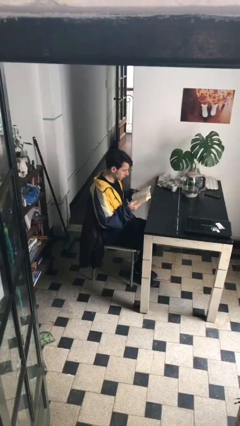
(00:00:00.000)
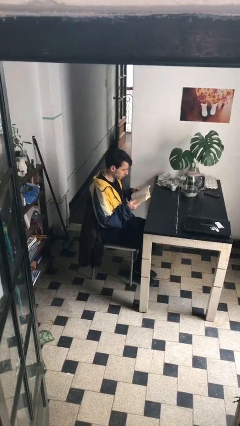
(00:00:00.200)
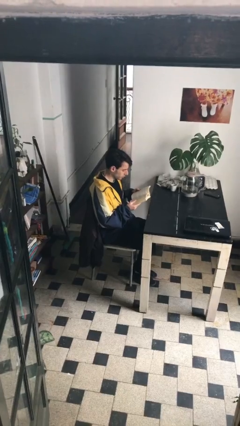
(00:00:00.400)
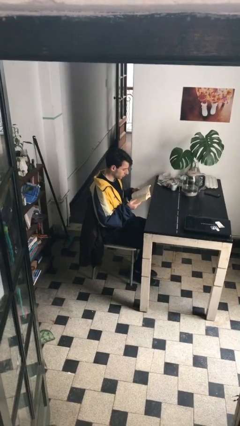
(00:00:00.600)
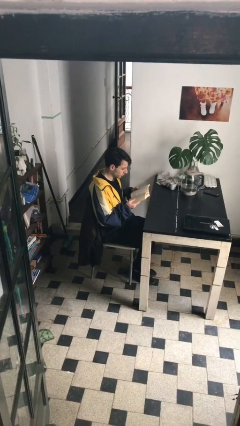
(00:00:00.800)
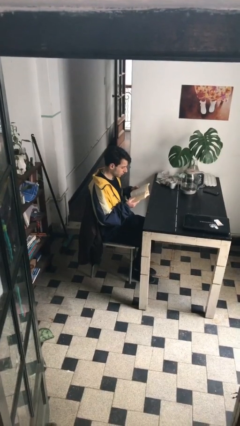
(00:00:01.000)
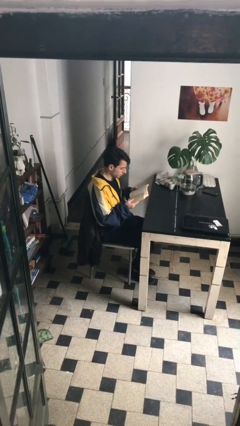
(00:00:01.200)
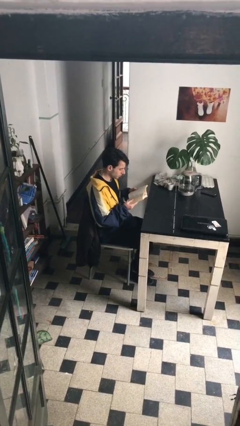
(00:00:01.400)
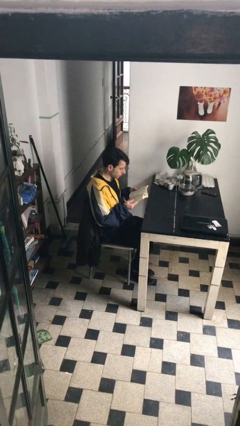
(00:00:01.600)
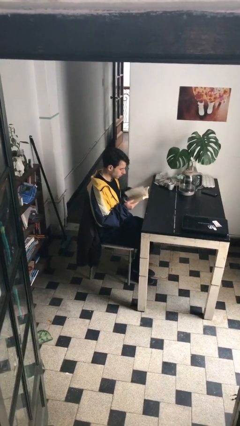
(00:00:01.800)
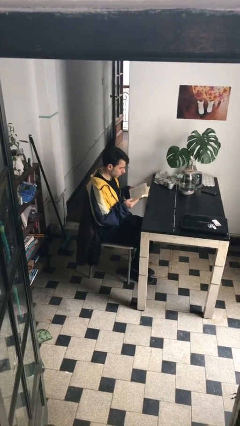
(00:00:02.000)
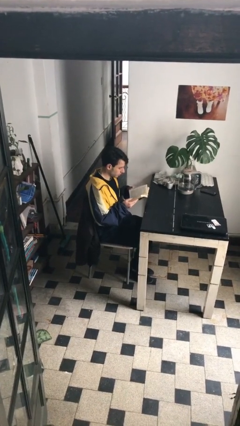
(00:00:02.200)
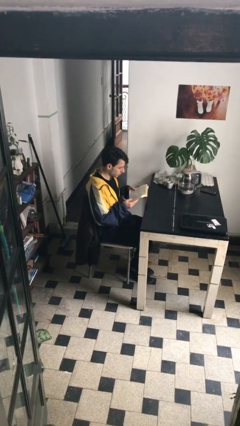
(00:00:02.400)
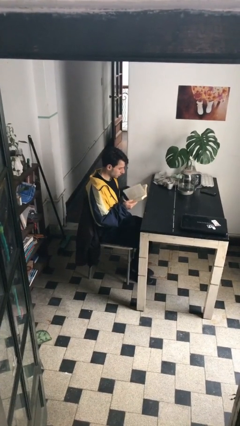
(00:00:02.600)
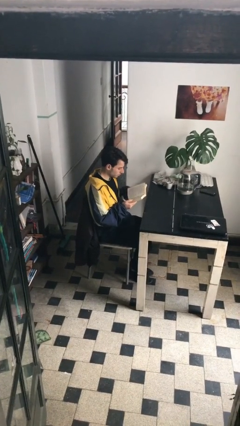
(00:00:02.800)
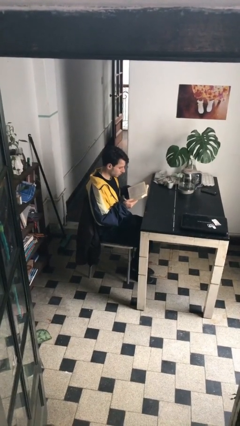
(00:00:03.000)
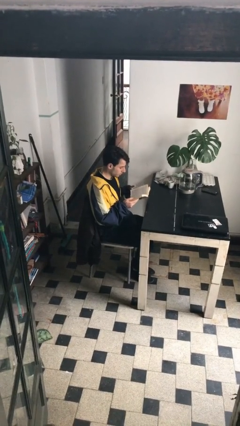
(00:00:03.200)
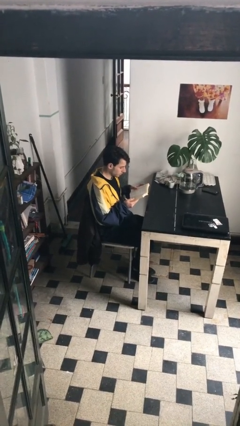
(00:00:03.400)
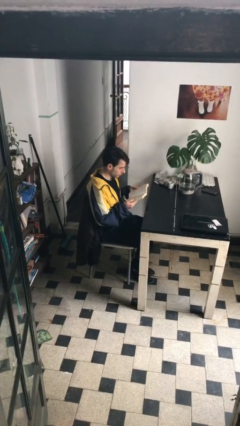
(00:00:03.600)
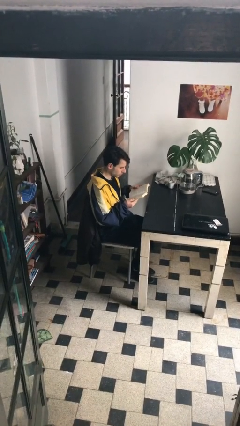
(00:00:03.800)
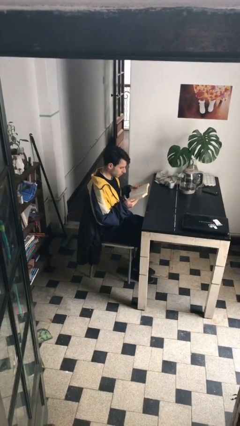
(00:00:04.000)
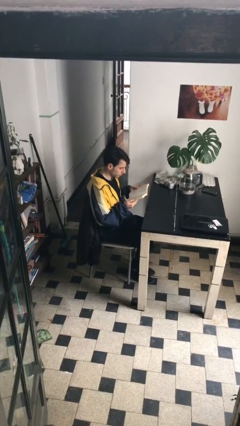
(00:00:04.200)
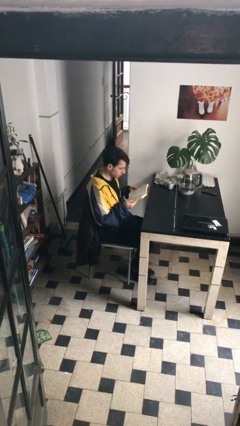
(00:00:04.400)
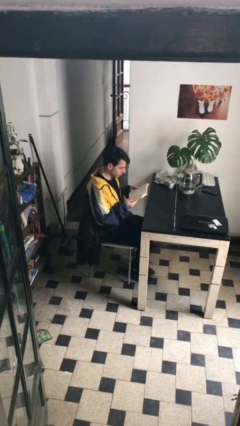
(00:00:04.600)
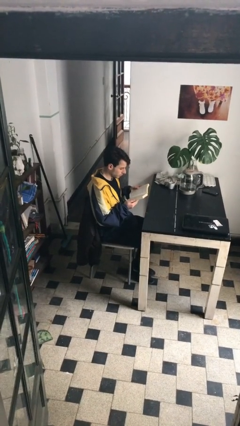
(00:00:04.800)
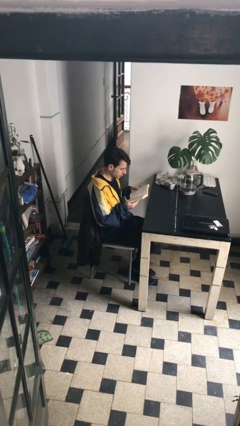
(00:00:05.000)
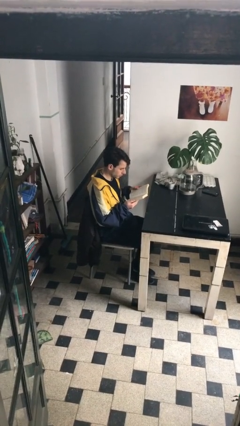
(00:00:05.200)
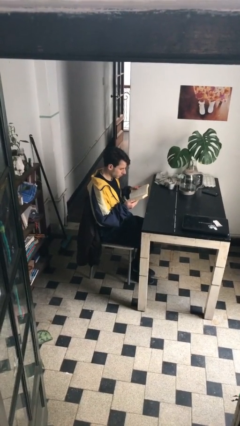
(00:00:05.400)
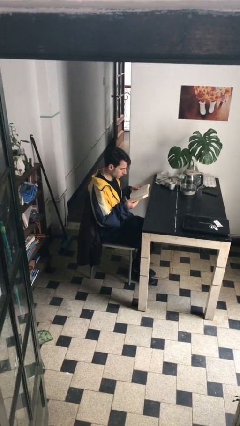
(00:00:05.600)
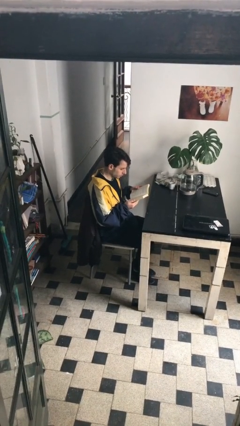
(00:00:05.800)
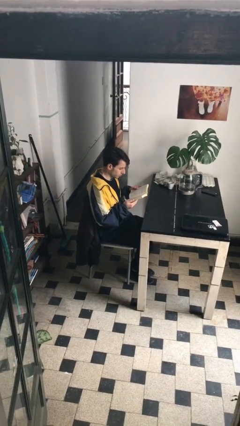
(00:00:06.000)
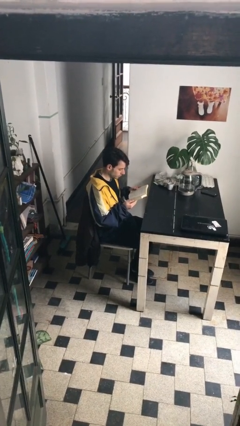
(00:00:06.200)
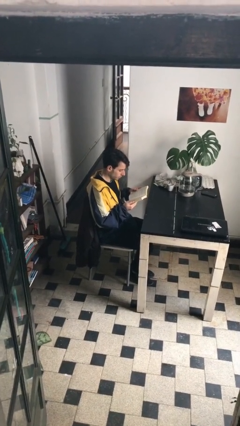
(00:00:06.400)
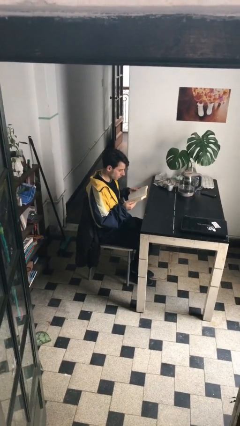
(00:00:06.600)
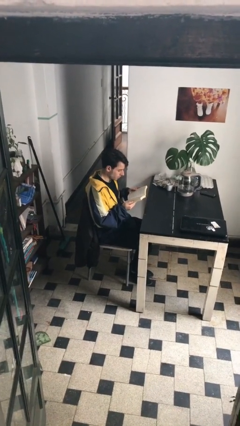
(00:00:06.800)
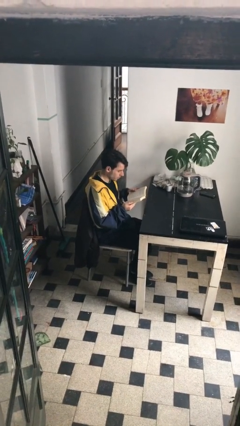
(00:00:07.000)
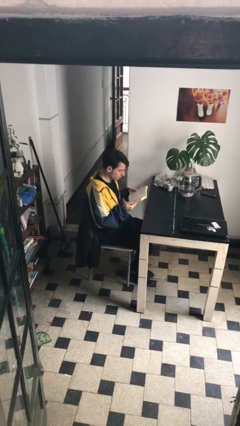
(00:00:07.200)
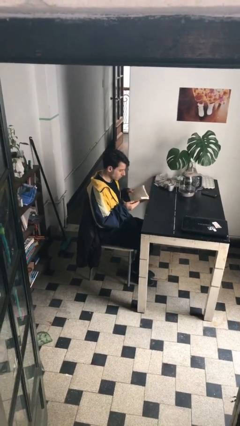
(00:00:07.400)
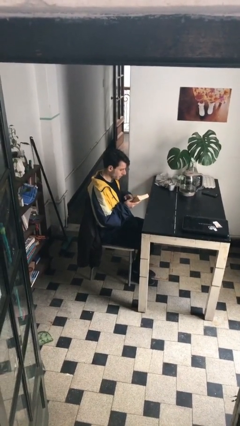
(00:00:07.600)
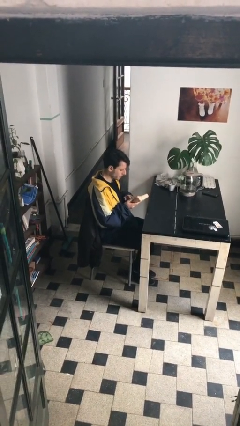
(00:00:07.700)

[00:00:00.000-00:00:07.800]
person reads document

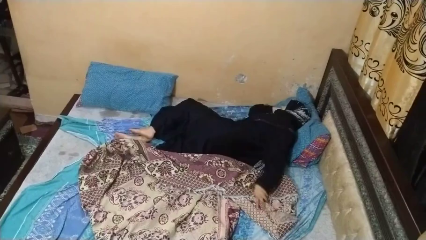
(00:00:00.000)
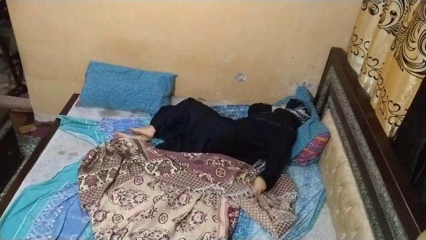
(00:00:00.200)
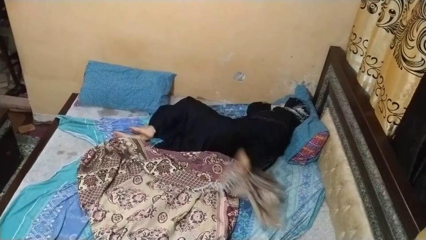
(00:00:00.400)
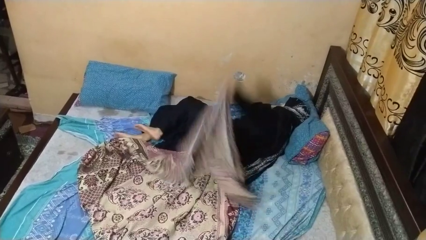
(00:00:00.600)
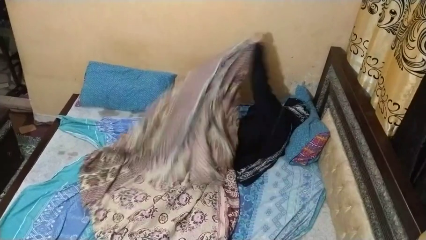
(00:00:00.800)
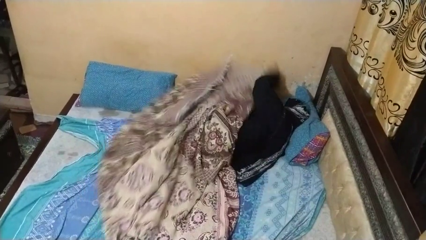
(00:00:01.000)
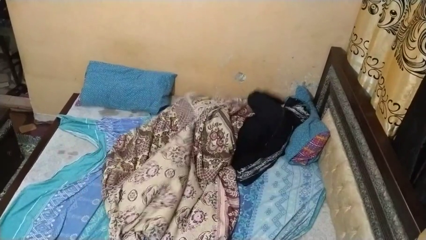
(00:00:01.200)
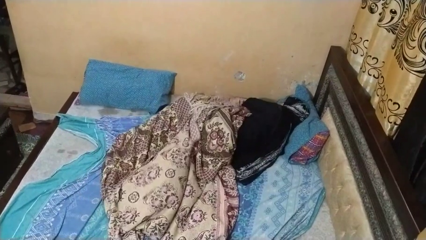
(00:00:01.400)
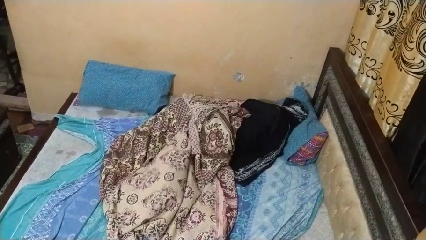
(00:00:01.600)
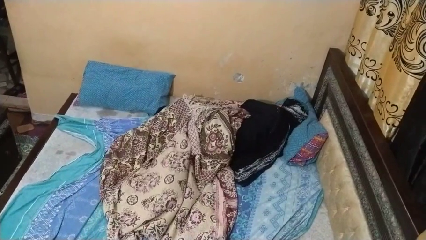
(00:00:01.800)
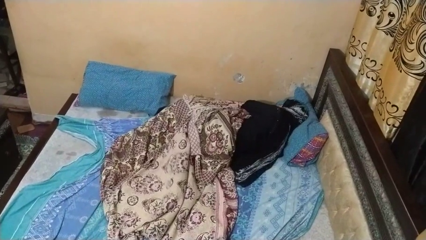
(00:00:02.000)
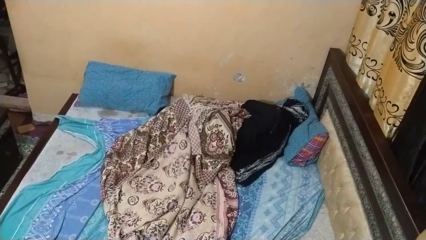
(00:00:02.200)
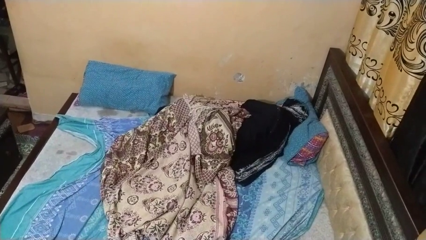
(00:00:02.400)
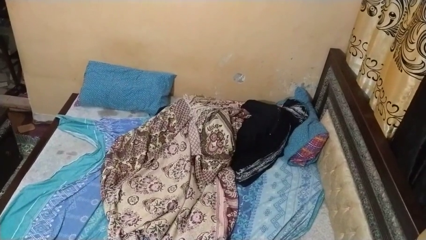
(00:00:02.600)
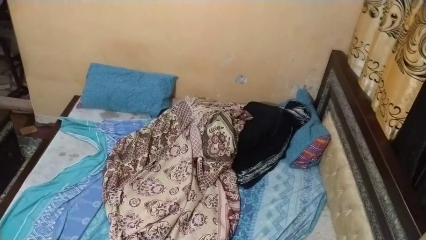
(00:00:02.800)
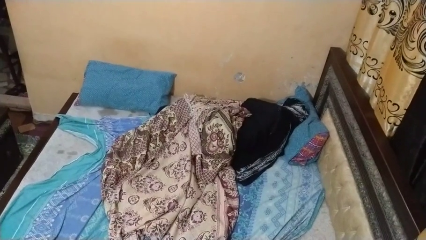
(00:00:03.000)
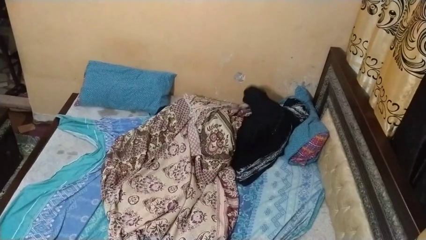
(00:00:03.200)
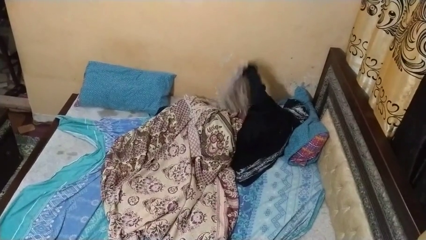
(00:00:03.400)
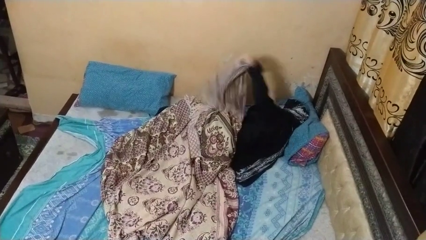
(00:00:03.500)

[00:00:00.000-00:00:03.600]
person covers with blanket

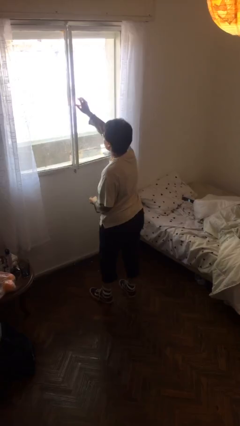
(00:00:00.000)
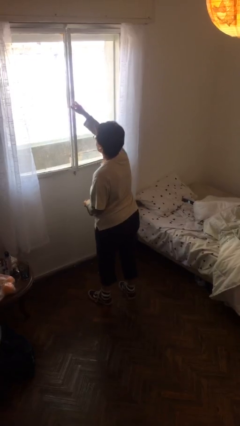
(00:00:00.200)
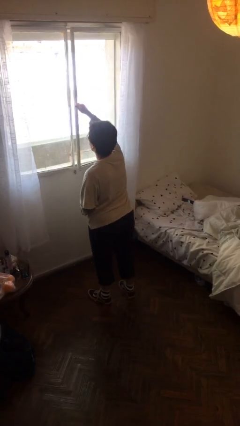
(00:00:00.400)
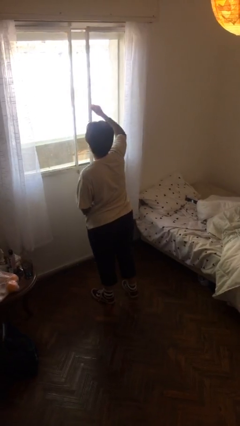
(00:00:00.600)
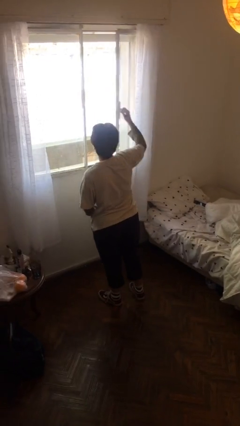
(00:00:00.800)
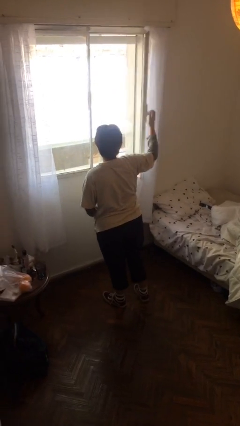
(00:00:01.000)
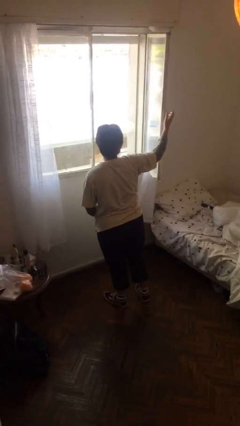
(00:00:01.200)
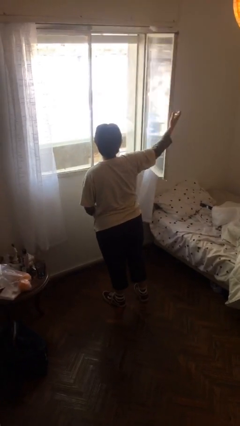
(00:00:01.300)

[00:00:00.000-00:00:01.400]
person opens home window

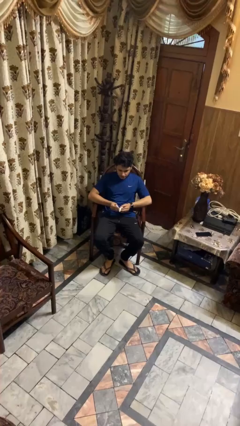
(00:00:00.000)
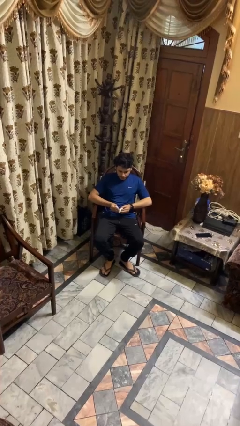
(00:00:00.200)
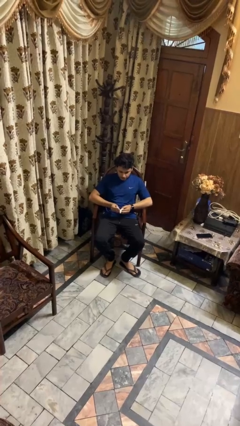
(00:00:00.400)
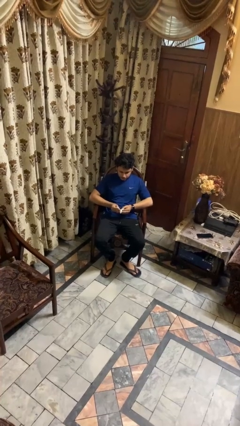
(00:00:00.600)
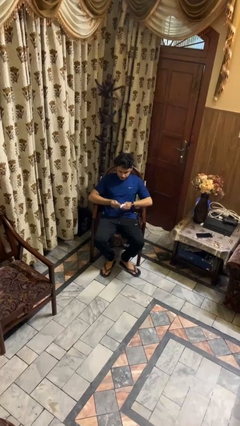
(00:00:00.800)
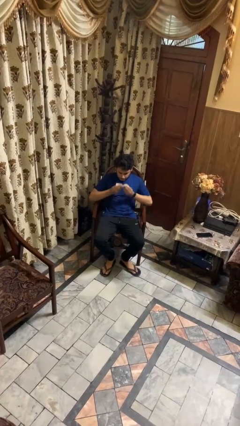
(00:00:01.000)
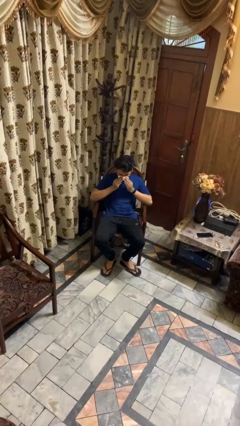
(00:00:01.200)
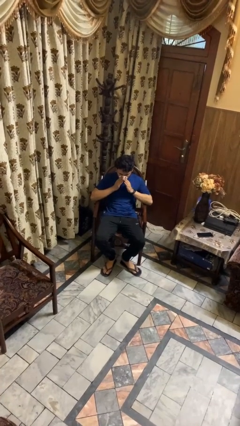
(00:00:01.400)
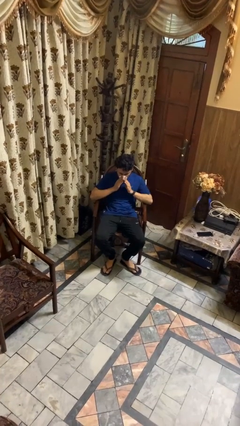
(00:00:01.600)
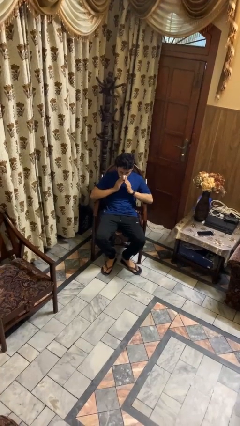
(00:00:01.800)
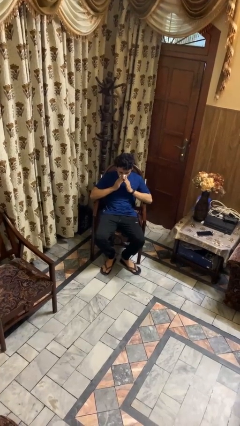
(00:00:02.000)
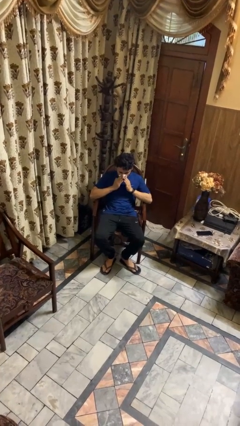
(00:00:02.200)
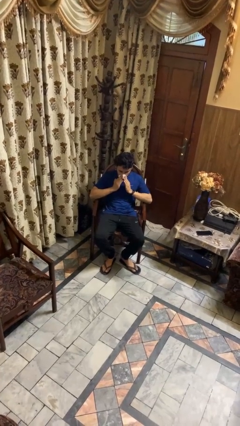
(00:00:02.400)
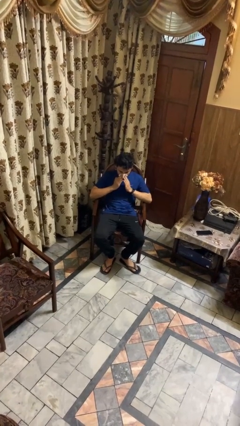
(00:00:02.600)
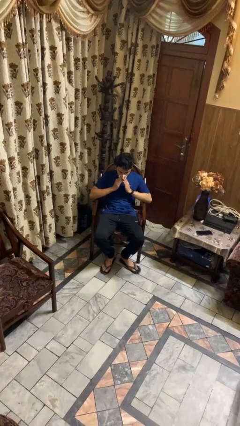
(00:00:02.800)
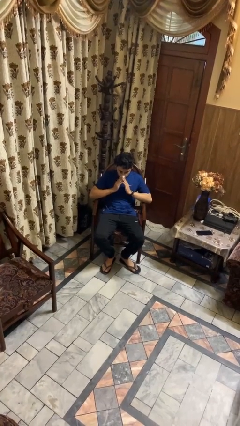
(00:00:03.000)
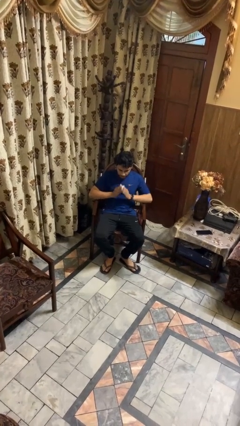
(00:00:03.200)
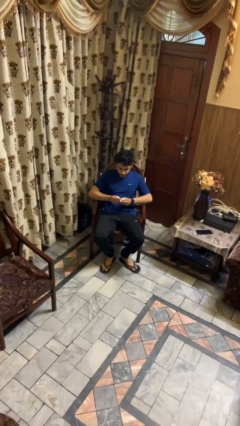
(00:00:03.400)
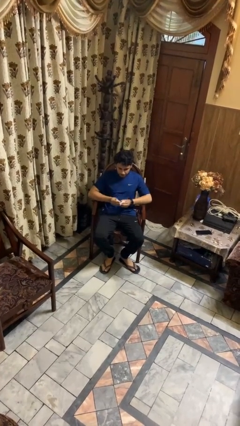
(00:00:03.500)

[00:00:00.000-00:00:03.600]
person blows nose

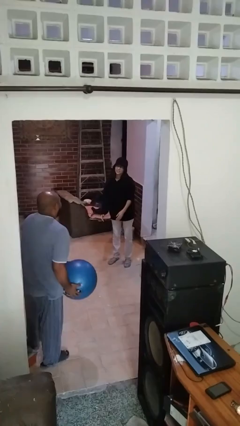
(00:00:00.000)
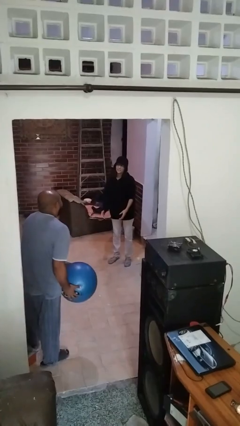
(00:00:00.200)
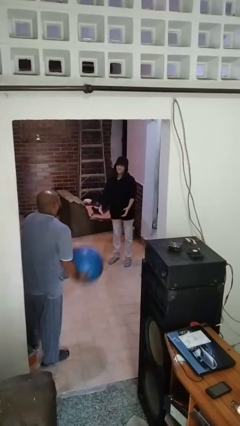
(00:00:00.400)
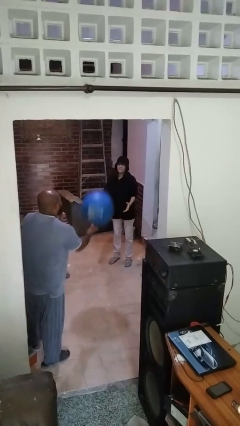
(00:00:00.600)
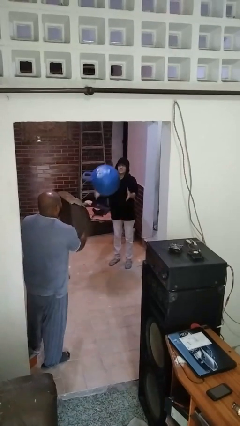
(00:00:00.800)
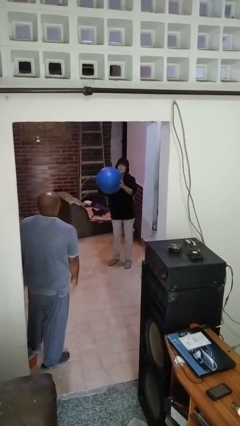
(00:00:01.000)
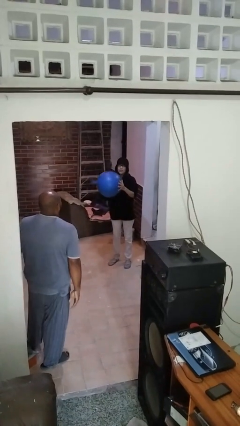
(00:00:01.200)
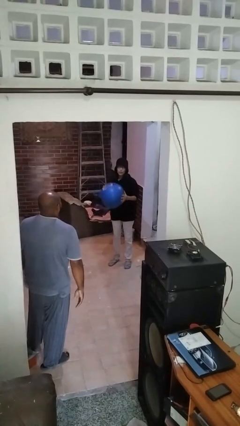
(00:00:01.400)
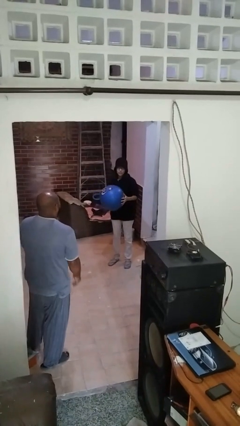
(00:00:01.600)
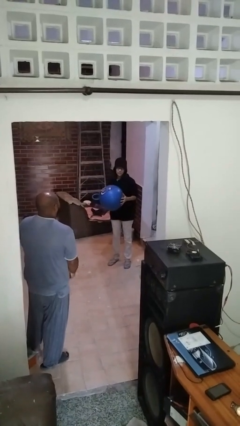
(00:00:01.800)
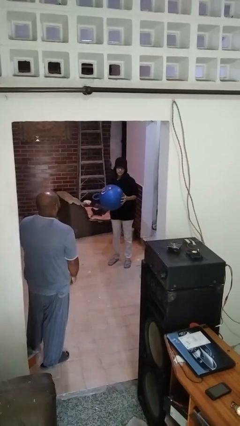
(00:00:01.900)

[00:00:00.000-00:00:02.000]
person catches object from person
